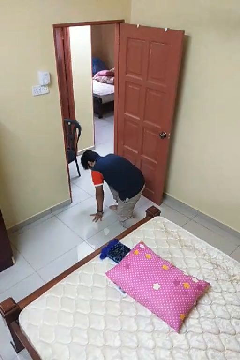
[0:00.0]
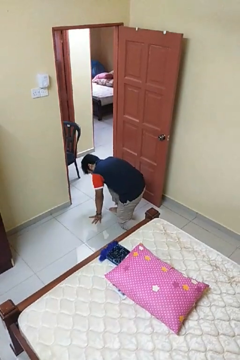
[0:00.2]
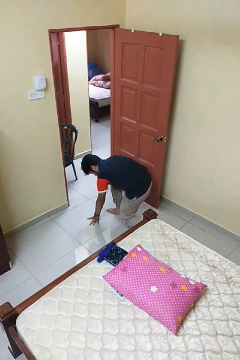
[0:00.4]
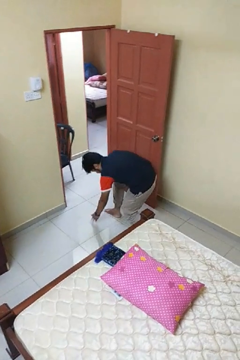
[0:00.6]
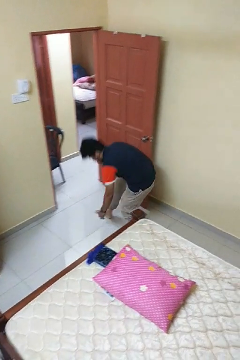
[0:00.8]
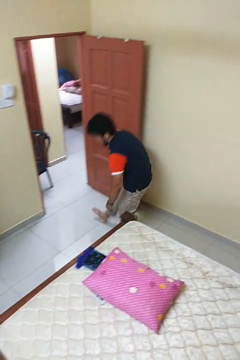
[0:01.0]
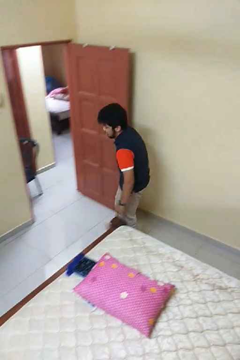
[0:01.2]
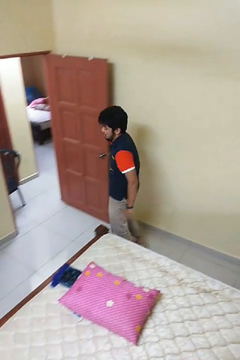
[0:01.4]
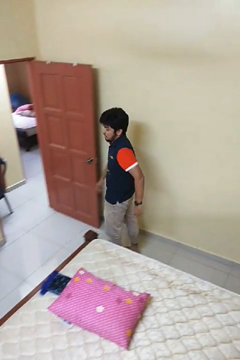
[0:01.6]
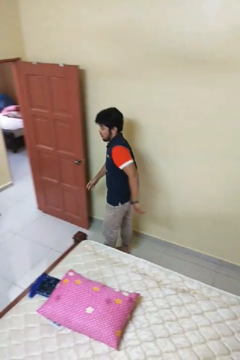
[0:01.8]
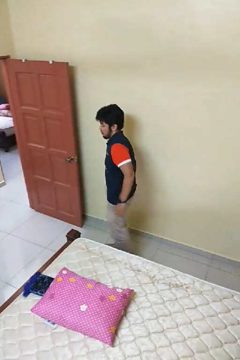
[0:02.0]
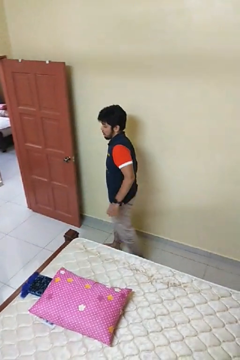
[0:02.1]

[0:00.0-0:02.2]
person stands up from floor

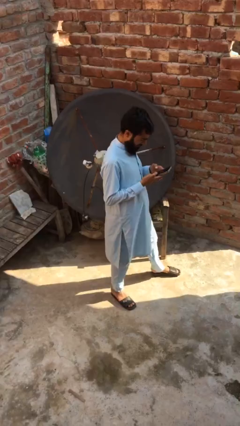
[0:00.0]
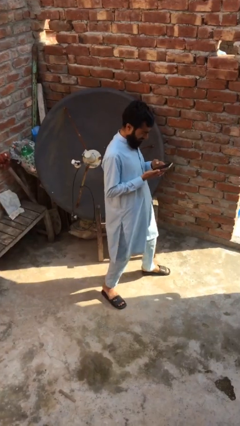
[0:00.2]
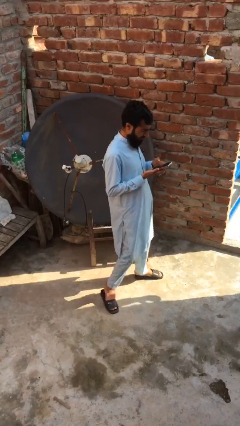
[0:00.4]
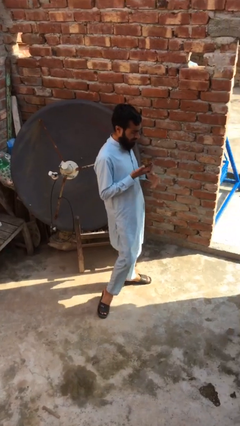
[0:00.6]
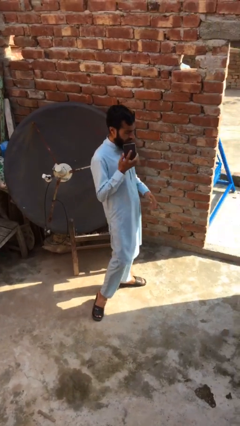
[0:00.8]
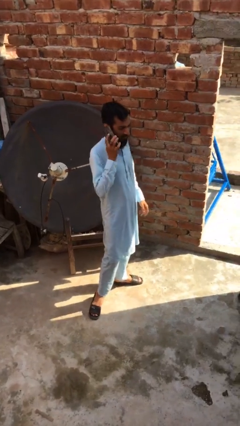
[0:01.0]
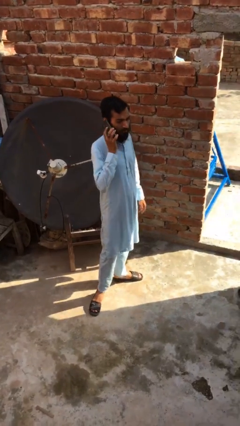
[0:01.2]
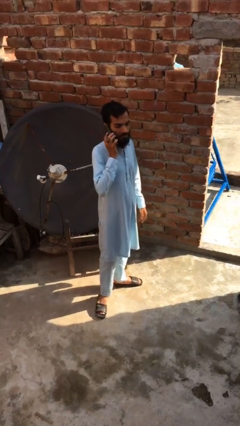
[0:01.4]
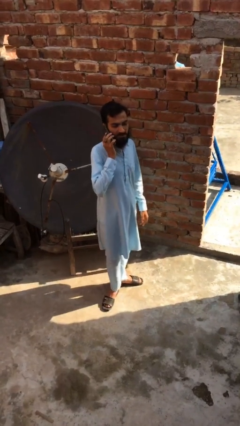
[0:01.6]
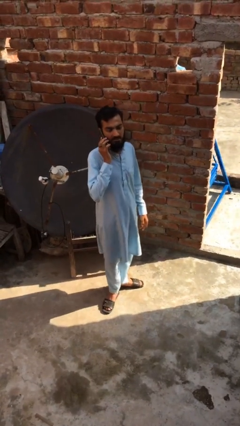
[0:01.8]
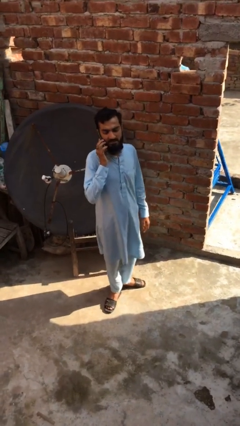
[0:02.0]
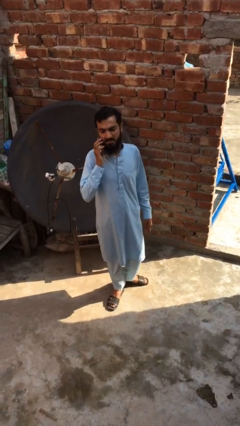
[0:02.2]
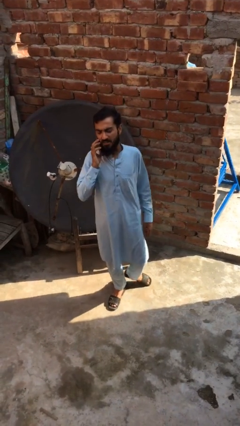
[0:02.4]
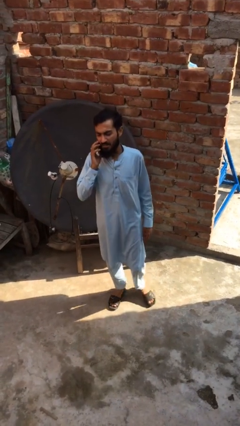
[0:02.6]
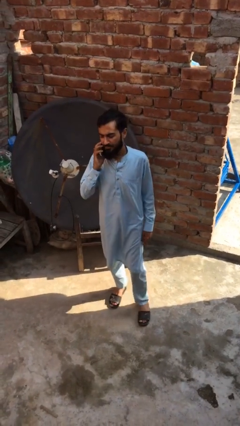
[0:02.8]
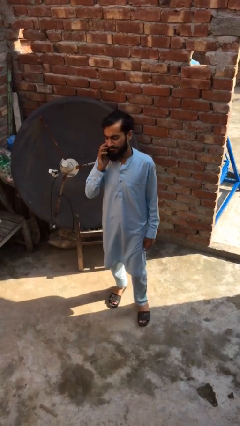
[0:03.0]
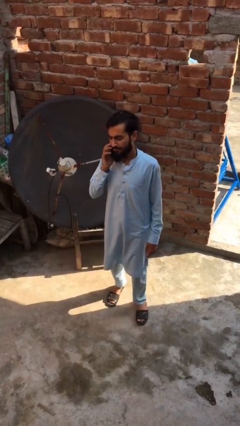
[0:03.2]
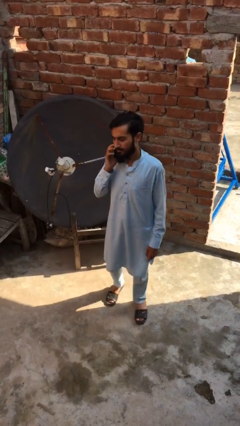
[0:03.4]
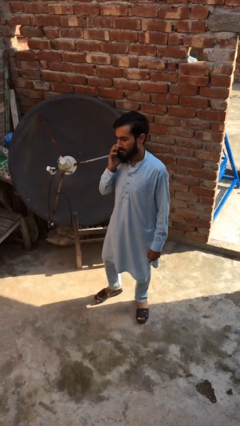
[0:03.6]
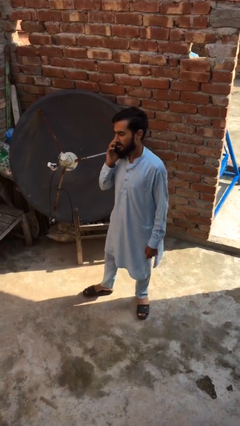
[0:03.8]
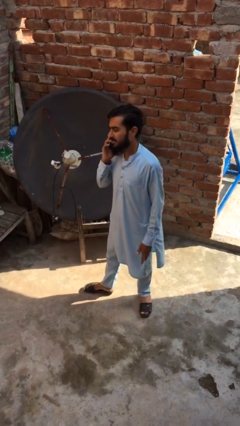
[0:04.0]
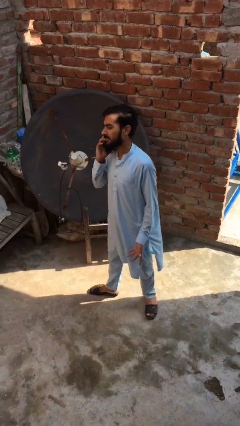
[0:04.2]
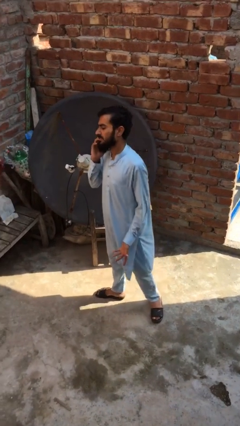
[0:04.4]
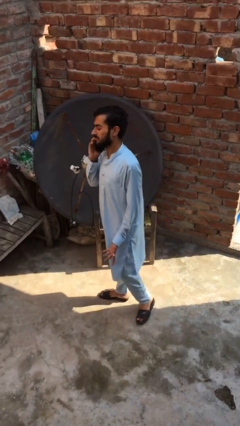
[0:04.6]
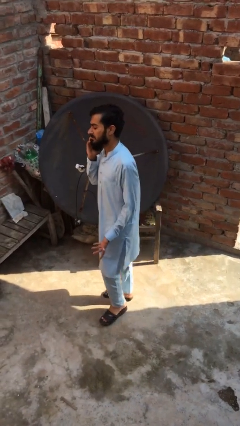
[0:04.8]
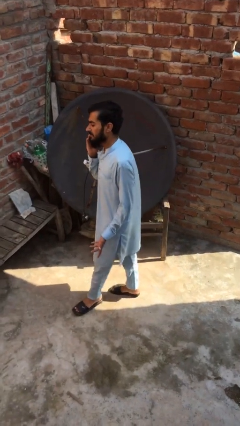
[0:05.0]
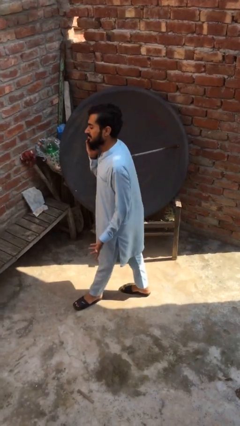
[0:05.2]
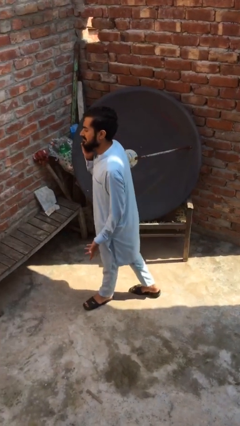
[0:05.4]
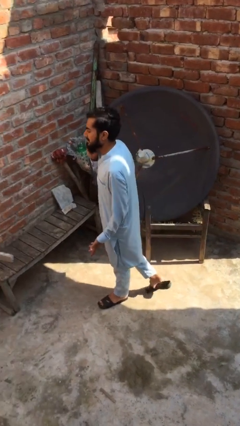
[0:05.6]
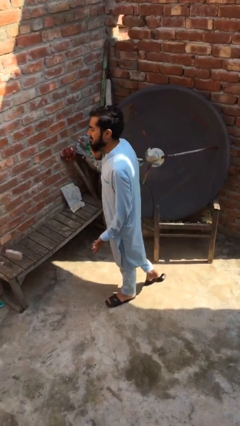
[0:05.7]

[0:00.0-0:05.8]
person talks on phone

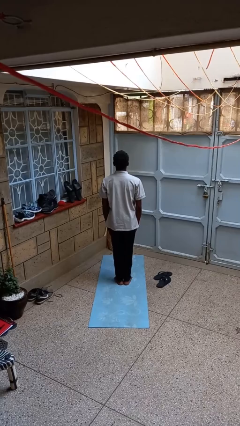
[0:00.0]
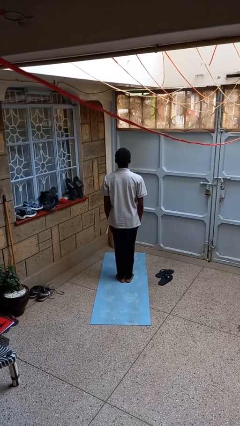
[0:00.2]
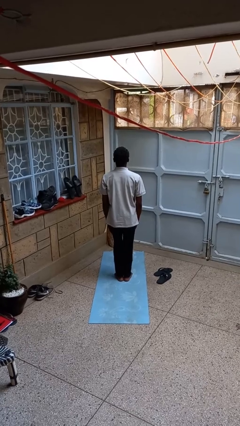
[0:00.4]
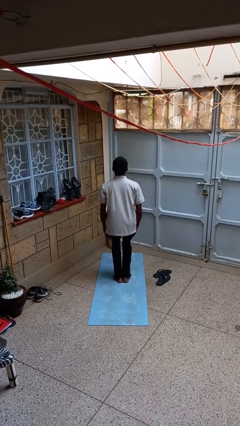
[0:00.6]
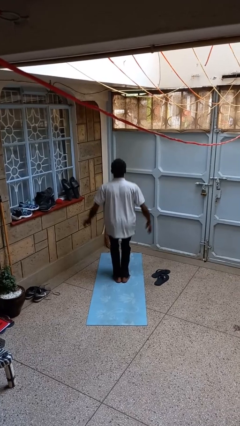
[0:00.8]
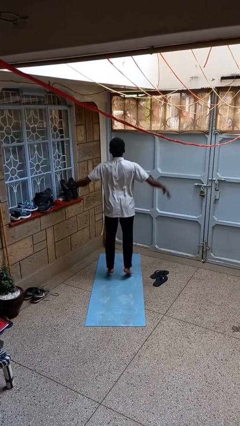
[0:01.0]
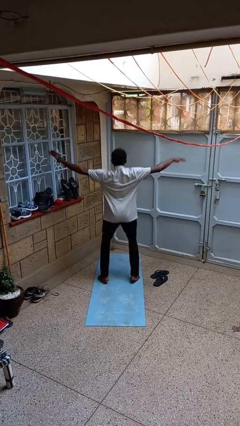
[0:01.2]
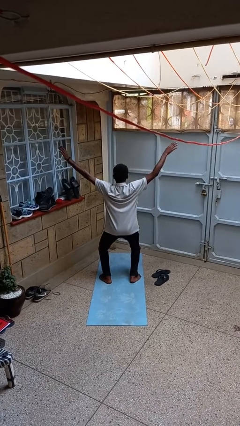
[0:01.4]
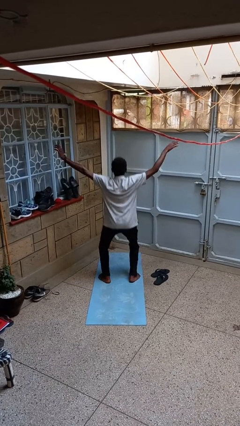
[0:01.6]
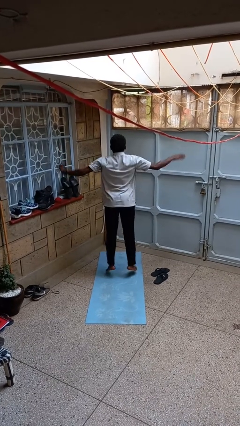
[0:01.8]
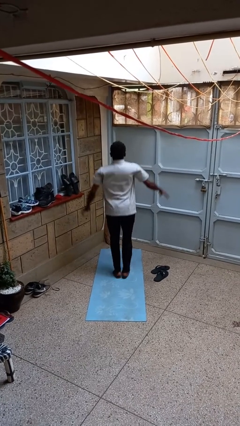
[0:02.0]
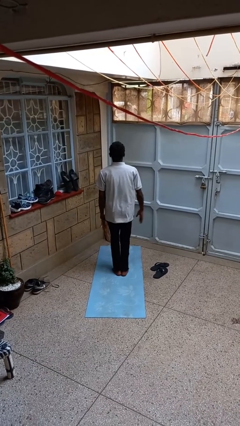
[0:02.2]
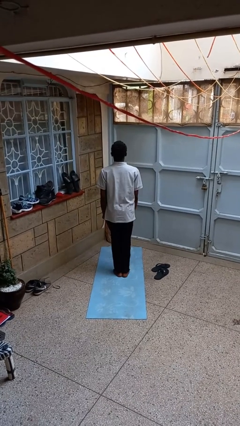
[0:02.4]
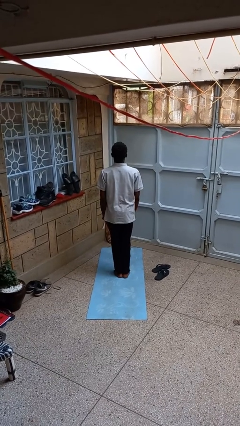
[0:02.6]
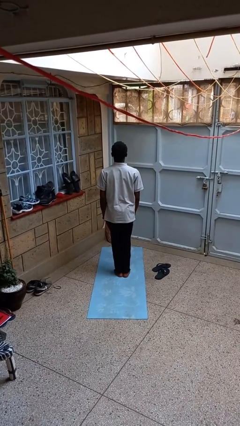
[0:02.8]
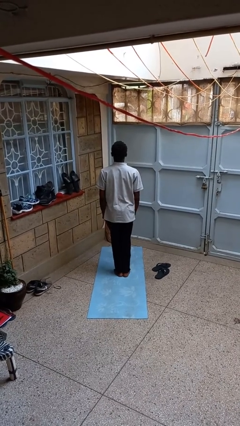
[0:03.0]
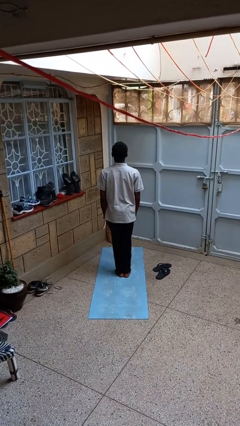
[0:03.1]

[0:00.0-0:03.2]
person exercises with jumping jacks

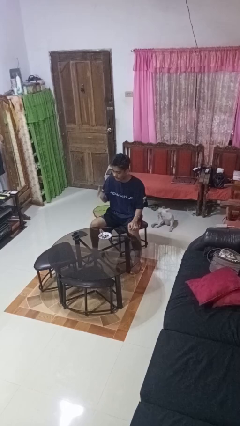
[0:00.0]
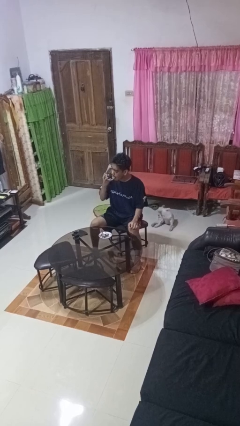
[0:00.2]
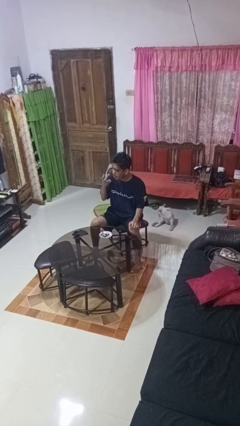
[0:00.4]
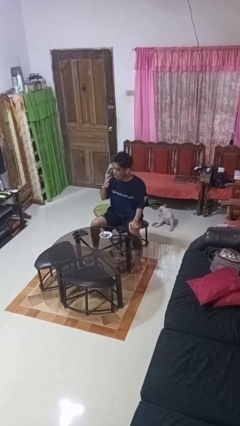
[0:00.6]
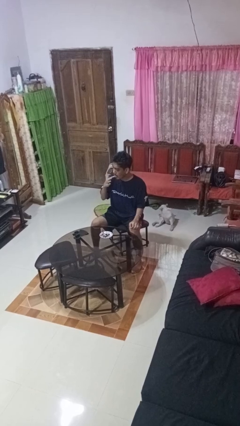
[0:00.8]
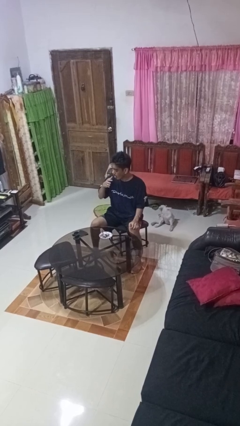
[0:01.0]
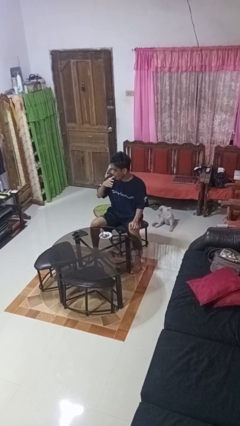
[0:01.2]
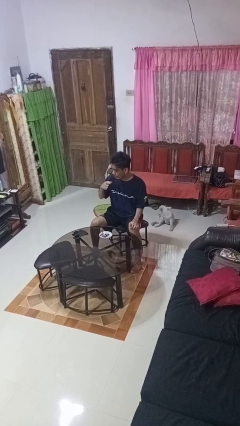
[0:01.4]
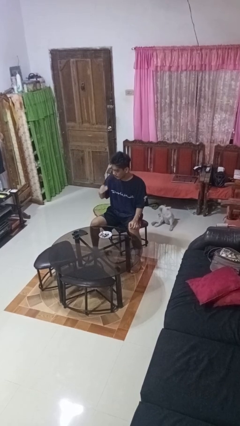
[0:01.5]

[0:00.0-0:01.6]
person licks fingers

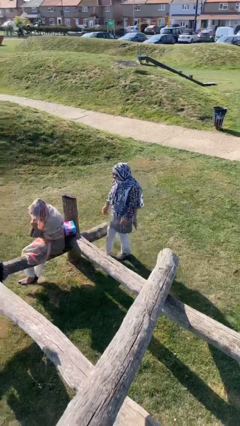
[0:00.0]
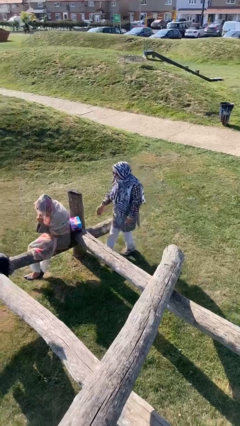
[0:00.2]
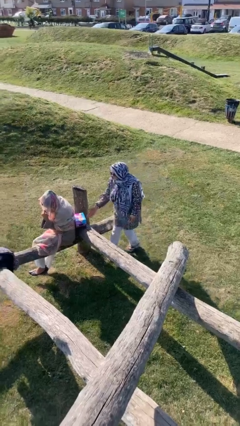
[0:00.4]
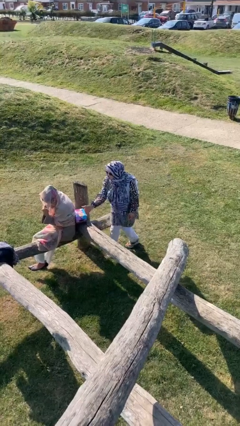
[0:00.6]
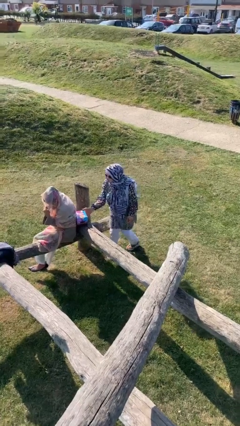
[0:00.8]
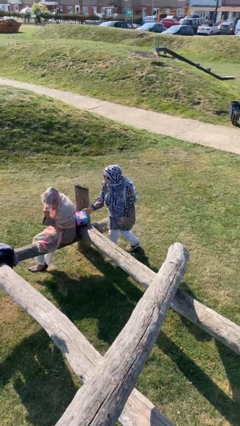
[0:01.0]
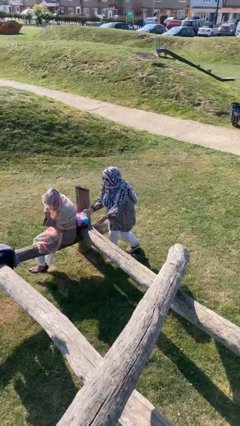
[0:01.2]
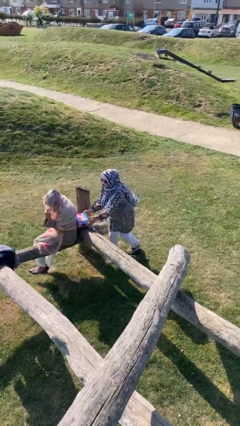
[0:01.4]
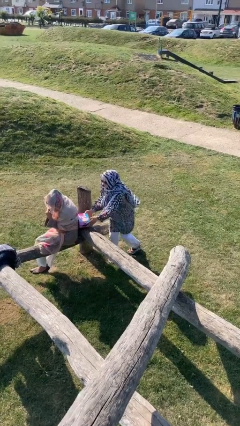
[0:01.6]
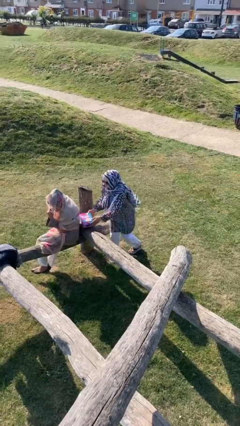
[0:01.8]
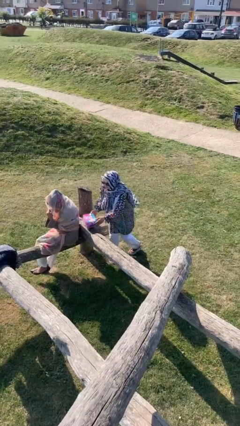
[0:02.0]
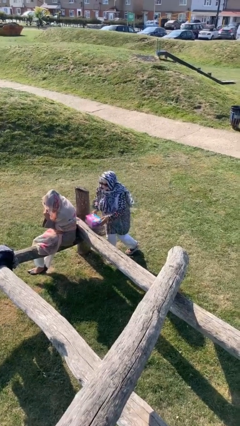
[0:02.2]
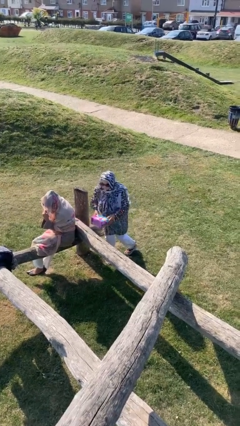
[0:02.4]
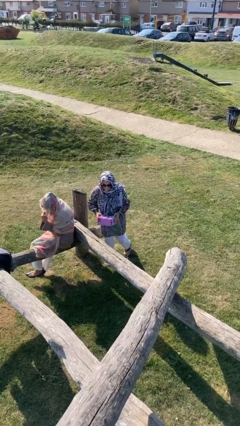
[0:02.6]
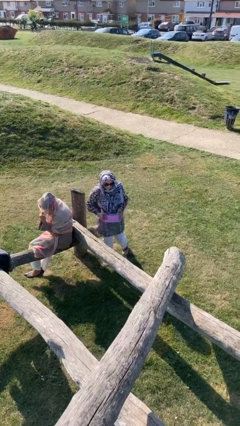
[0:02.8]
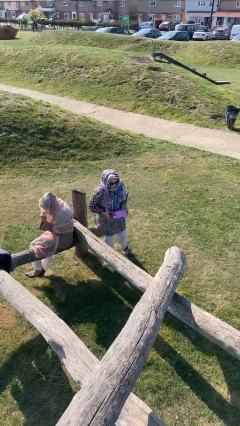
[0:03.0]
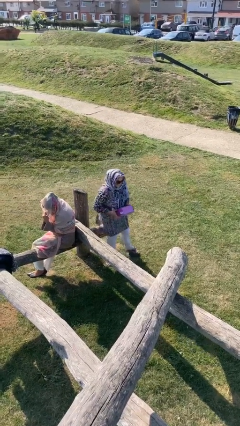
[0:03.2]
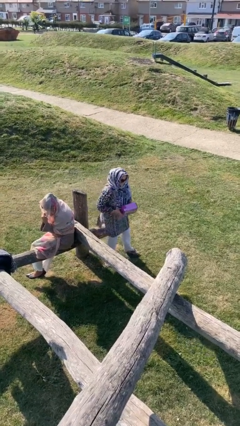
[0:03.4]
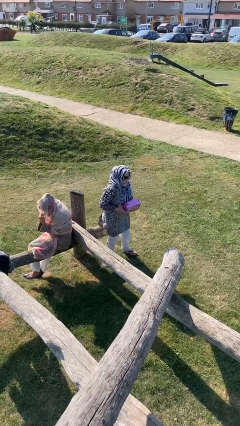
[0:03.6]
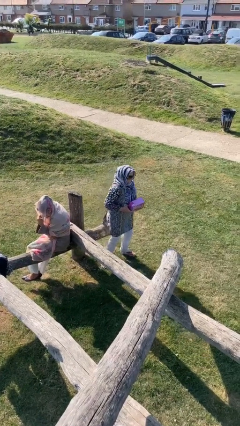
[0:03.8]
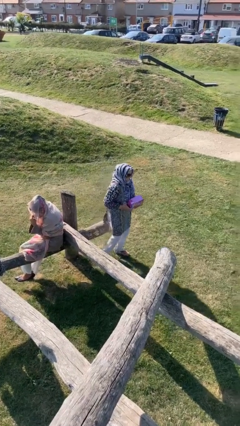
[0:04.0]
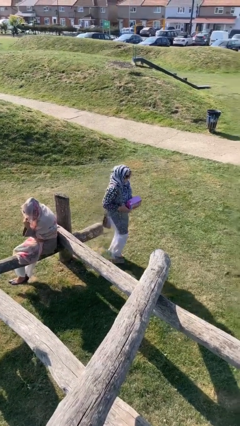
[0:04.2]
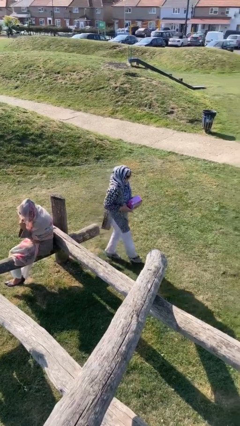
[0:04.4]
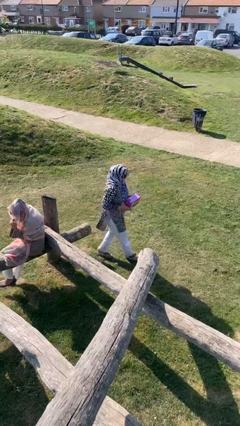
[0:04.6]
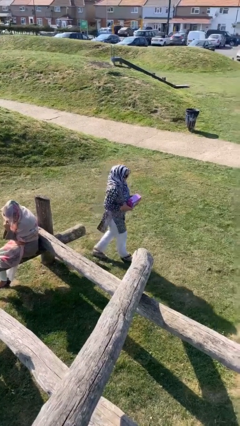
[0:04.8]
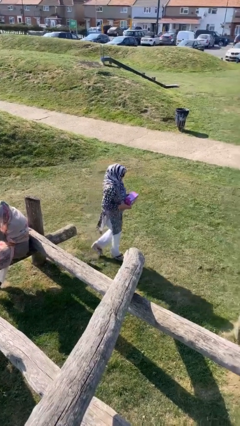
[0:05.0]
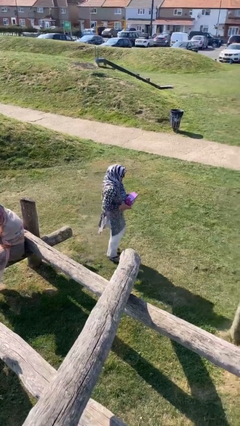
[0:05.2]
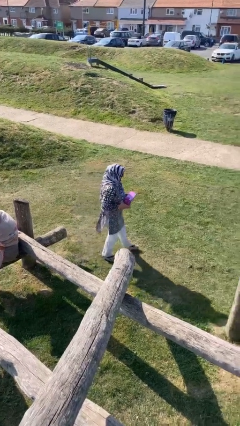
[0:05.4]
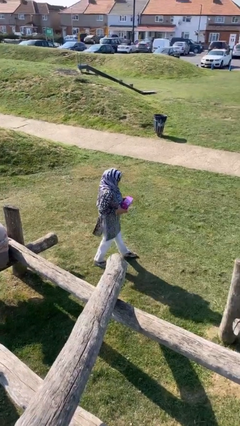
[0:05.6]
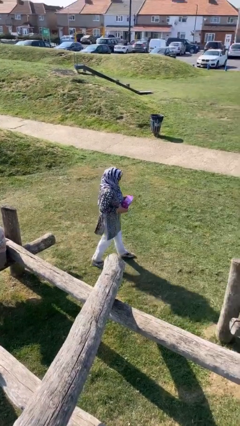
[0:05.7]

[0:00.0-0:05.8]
person steals object from person
